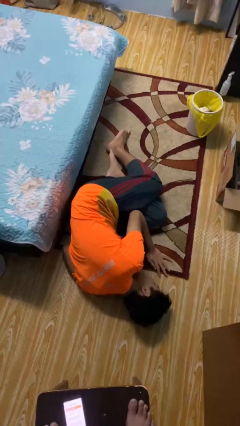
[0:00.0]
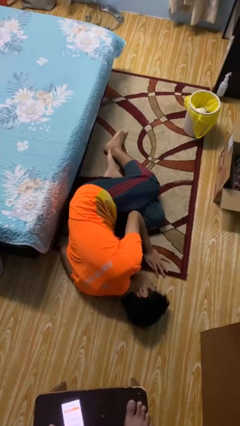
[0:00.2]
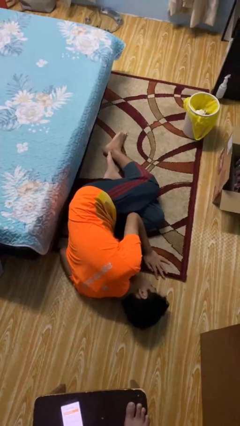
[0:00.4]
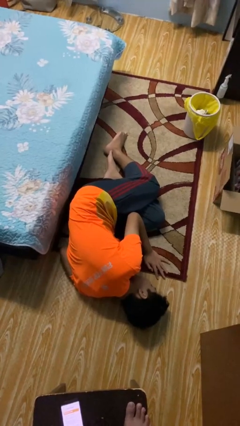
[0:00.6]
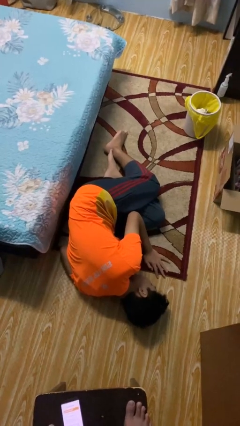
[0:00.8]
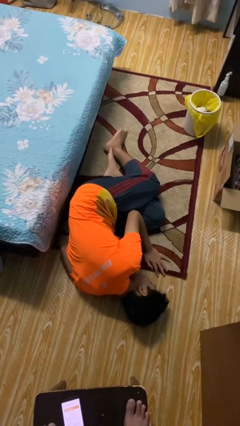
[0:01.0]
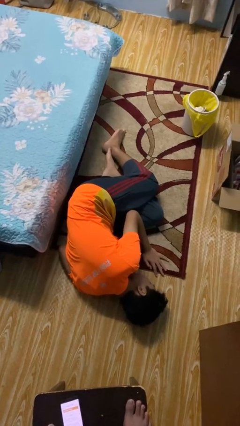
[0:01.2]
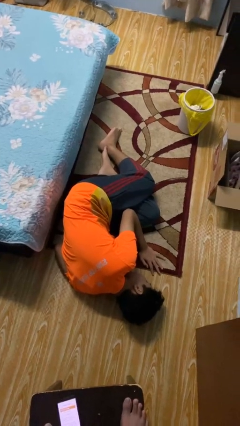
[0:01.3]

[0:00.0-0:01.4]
person lies down on floor

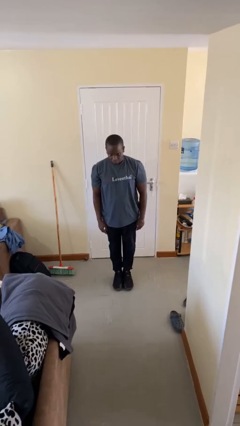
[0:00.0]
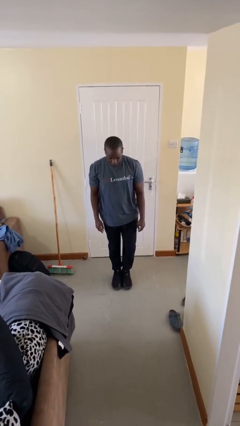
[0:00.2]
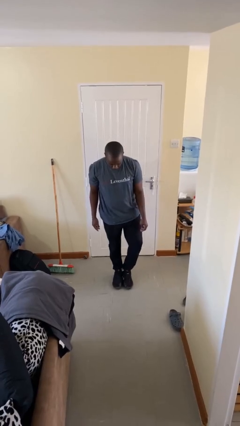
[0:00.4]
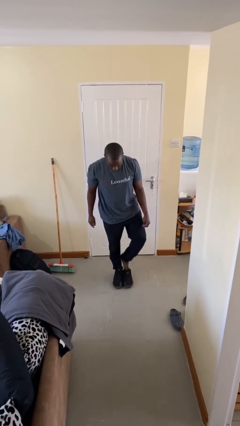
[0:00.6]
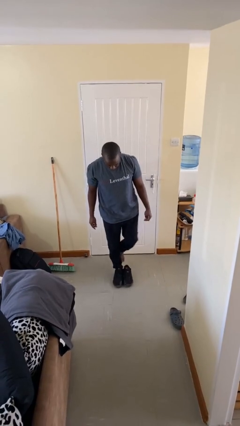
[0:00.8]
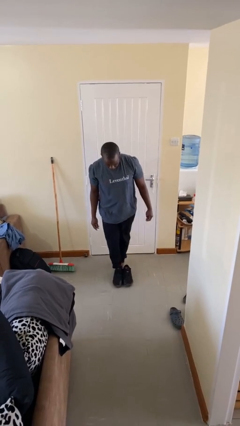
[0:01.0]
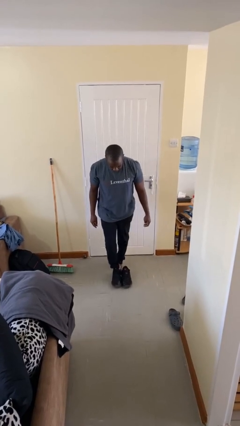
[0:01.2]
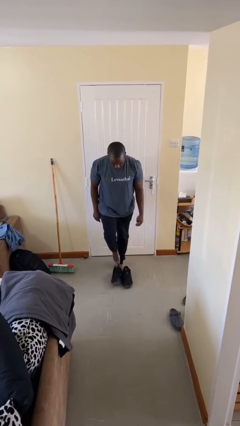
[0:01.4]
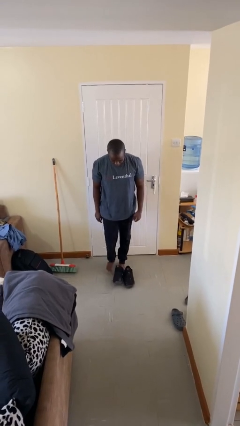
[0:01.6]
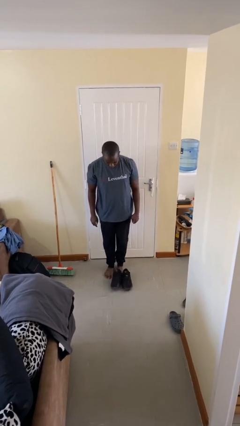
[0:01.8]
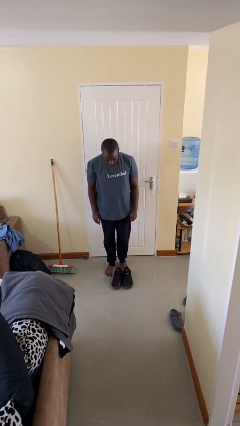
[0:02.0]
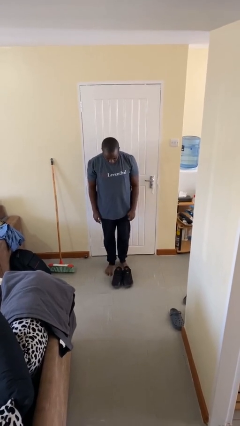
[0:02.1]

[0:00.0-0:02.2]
person takes off shoes

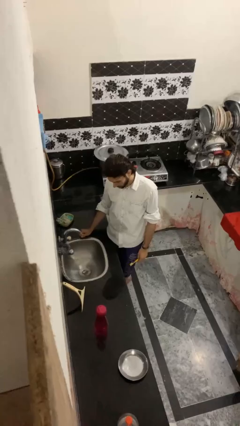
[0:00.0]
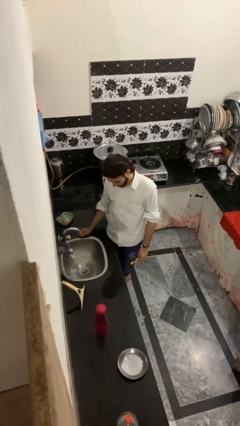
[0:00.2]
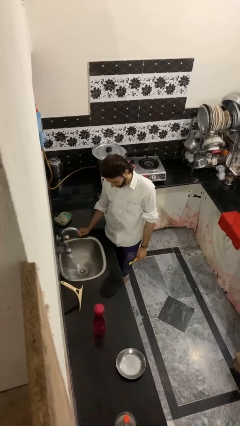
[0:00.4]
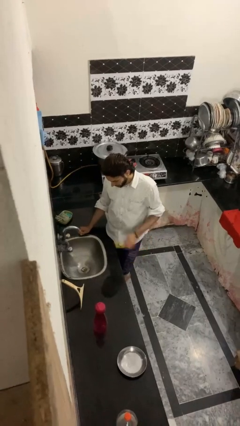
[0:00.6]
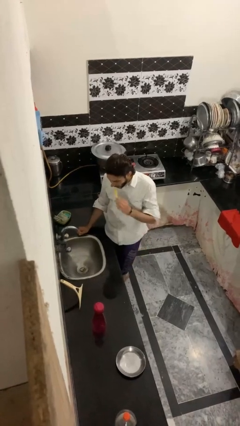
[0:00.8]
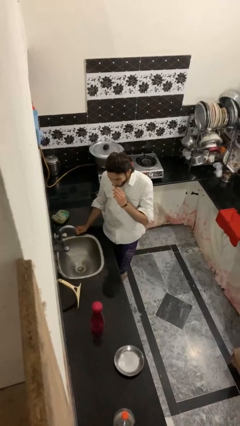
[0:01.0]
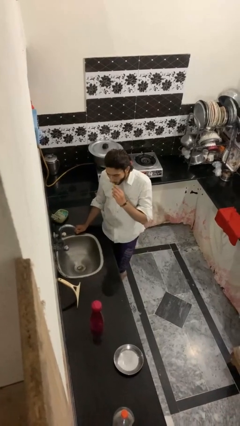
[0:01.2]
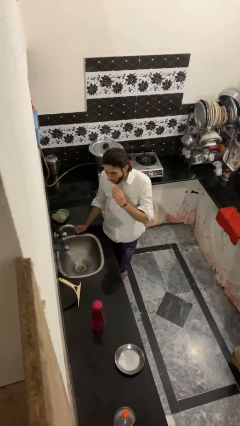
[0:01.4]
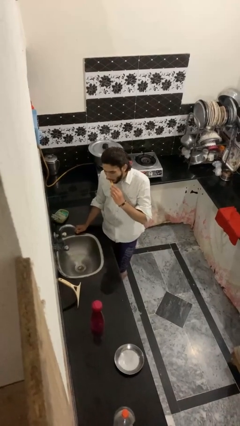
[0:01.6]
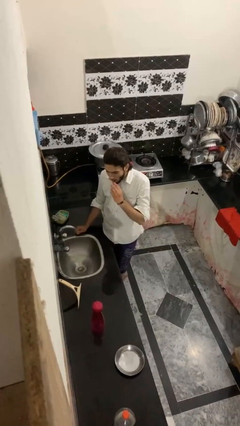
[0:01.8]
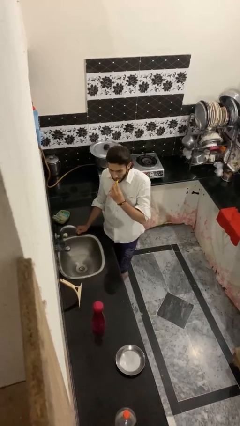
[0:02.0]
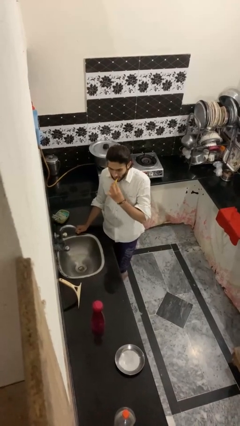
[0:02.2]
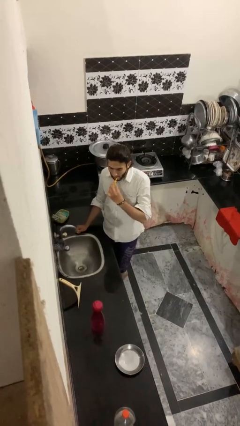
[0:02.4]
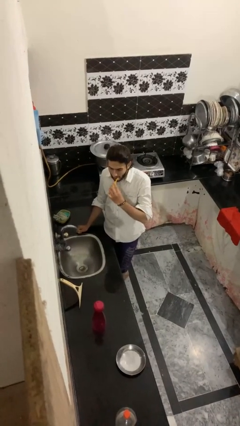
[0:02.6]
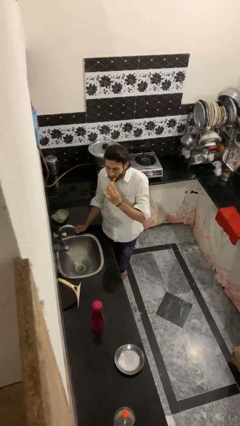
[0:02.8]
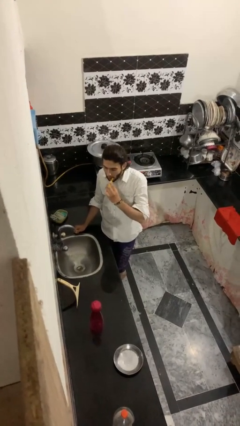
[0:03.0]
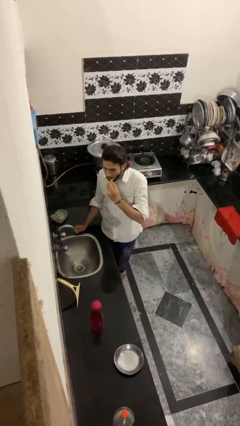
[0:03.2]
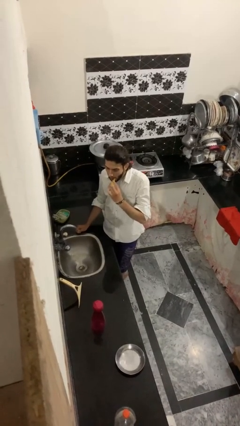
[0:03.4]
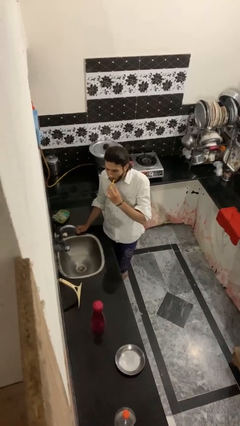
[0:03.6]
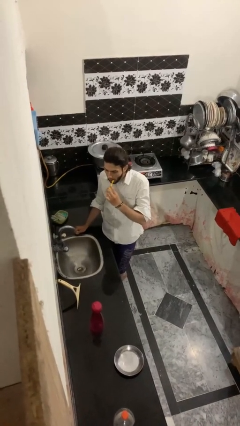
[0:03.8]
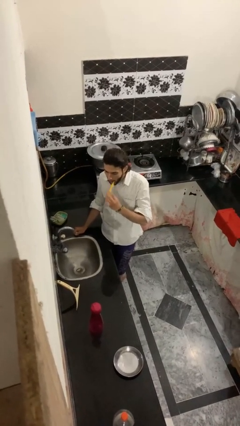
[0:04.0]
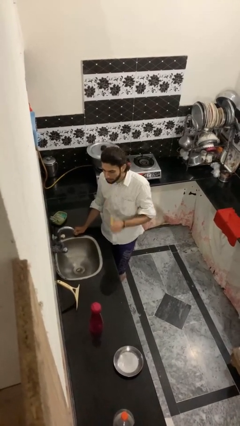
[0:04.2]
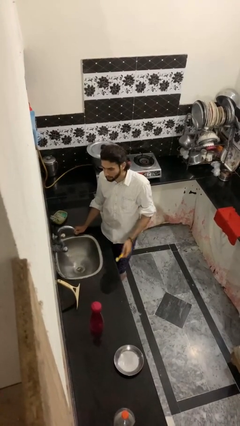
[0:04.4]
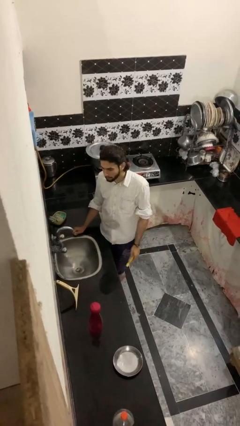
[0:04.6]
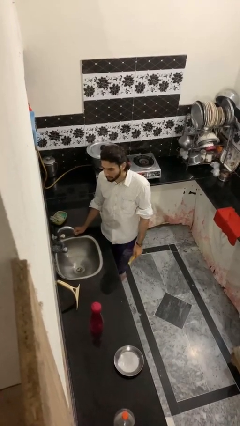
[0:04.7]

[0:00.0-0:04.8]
person brushes teeth

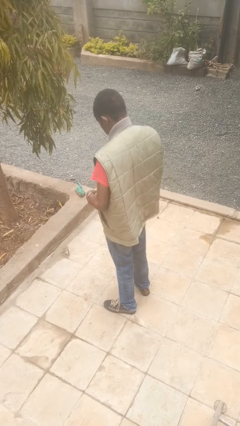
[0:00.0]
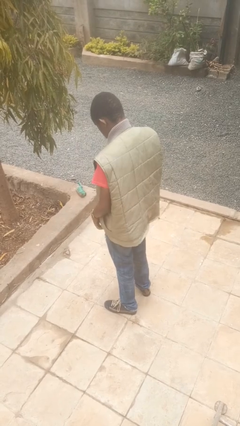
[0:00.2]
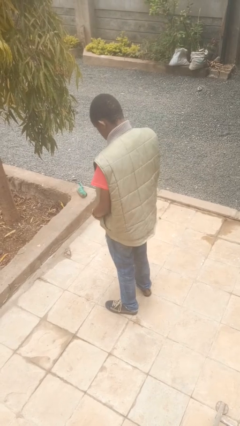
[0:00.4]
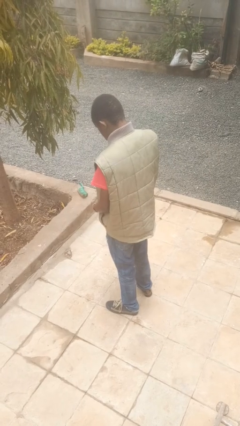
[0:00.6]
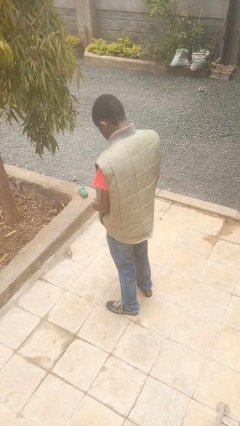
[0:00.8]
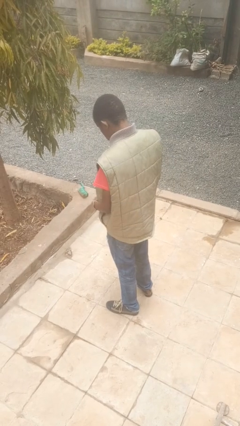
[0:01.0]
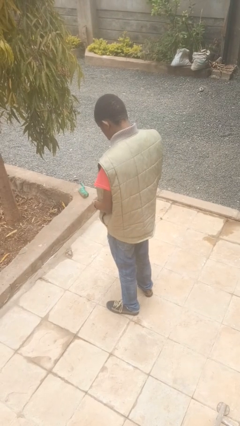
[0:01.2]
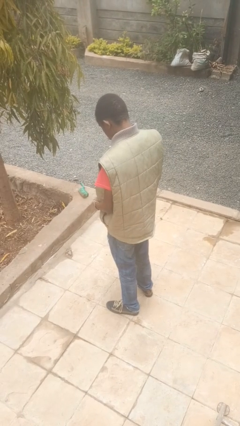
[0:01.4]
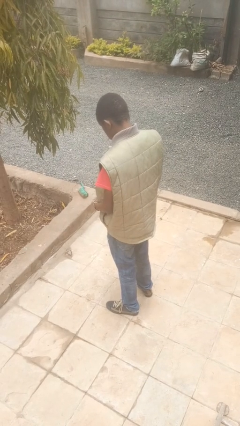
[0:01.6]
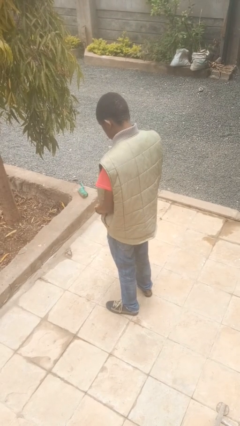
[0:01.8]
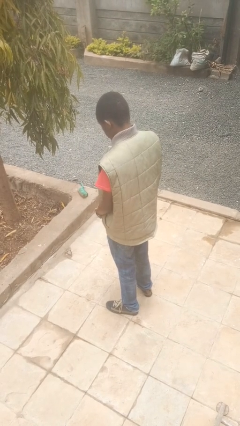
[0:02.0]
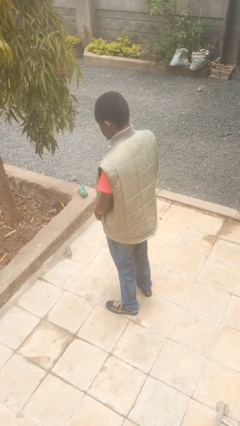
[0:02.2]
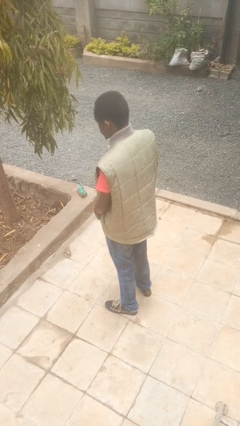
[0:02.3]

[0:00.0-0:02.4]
person zips up jacket

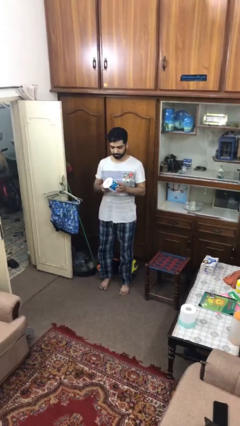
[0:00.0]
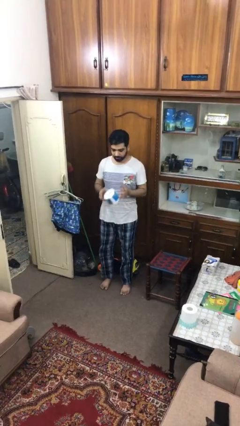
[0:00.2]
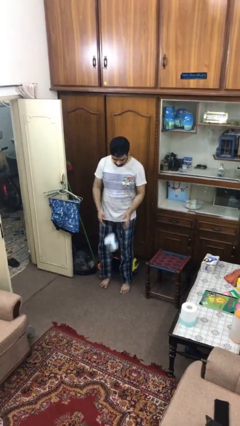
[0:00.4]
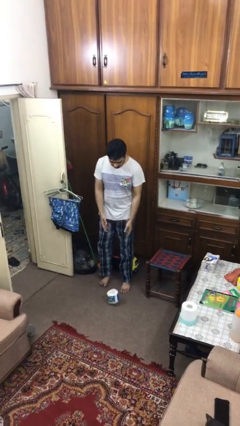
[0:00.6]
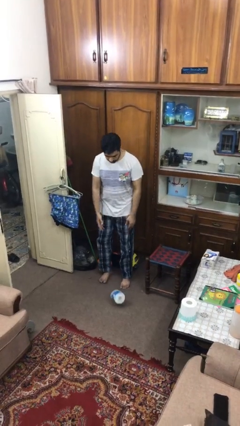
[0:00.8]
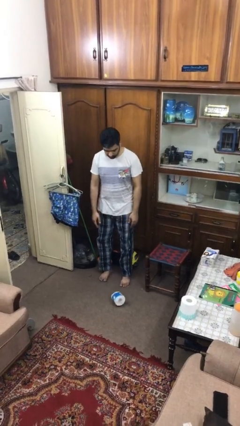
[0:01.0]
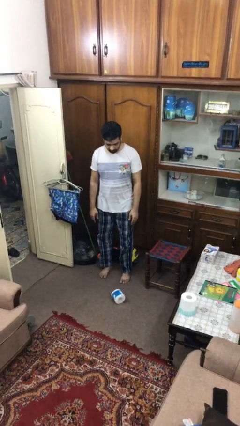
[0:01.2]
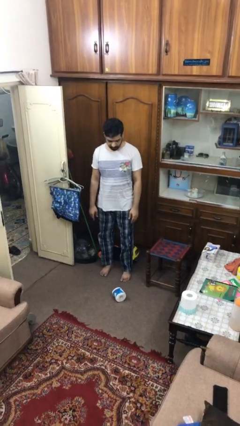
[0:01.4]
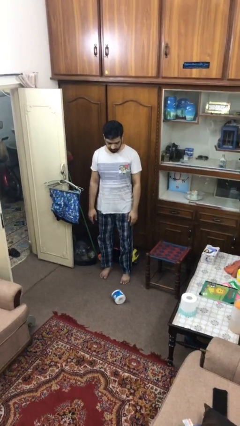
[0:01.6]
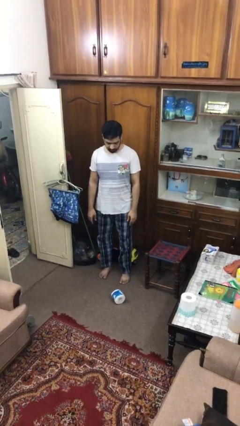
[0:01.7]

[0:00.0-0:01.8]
person drops object

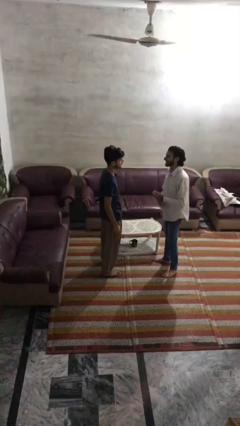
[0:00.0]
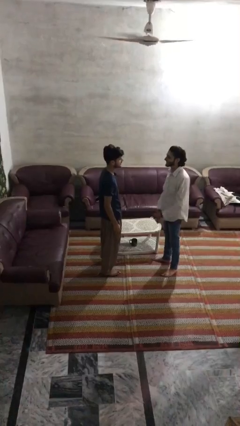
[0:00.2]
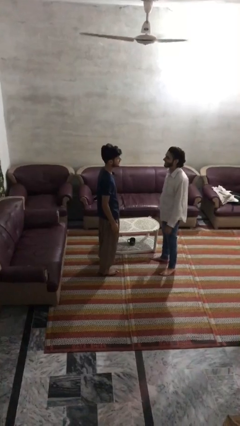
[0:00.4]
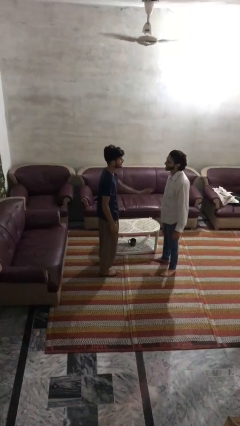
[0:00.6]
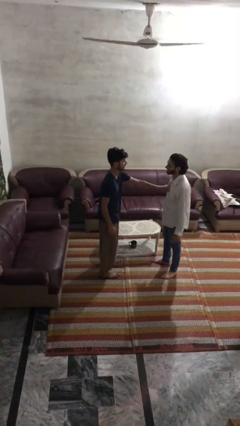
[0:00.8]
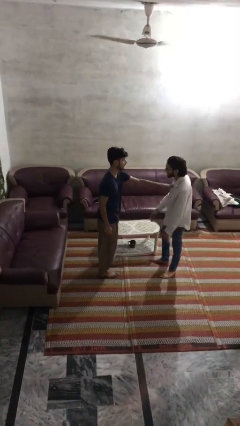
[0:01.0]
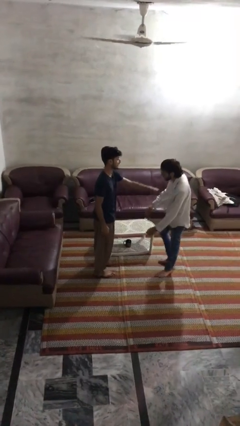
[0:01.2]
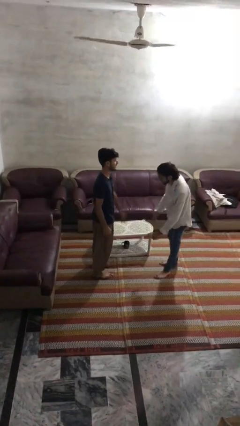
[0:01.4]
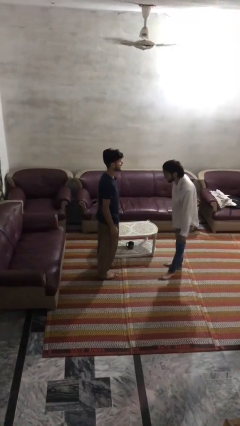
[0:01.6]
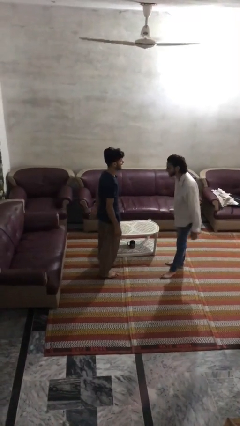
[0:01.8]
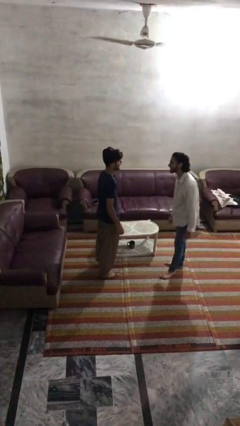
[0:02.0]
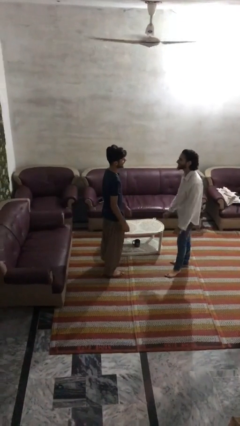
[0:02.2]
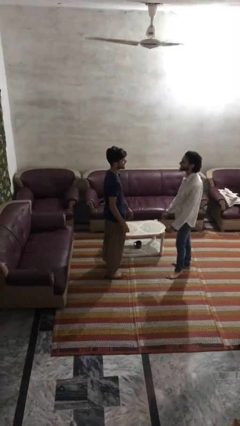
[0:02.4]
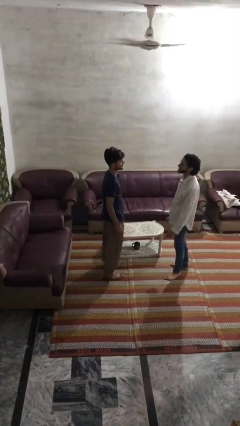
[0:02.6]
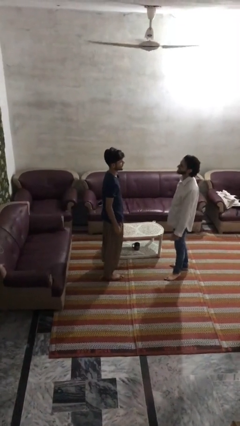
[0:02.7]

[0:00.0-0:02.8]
person shoves person

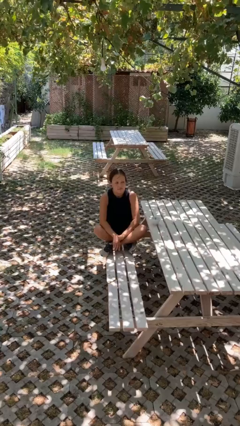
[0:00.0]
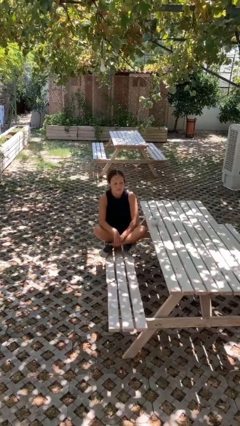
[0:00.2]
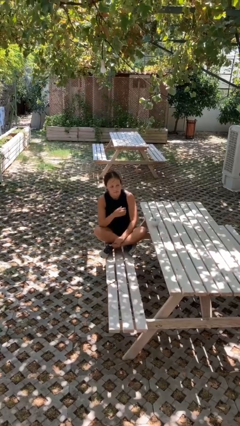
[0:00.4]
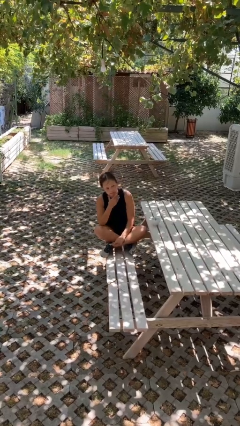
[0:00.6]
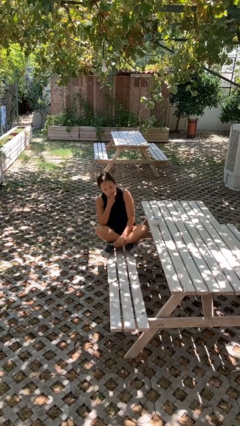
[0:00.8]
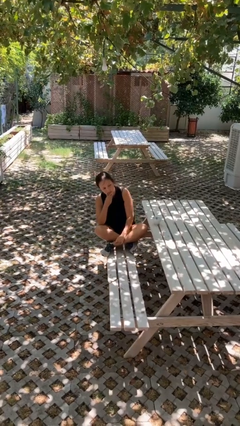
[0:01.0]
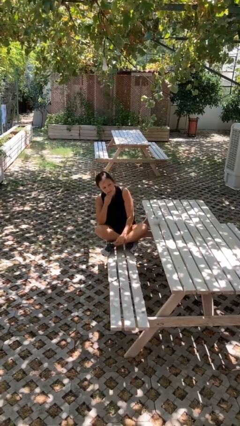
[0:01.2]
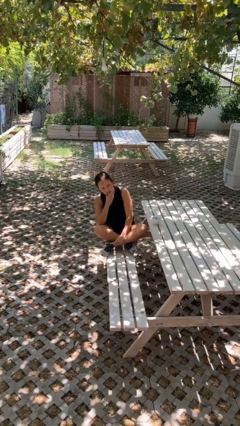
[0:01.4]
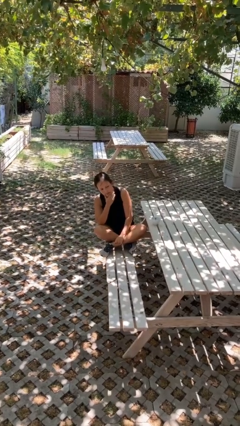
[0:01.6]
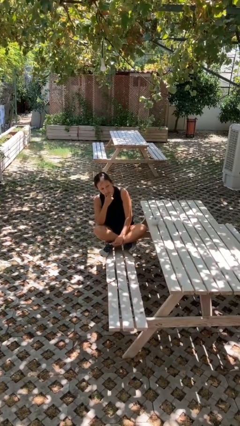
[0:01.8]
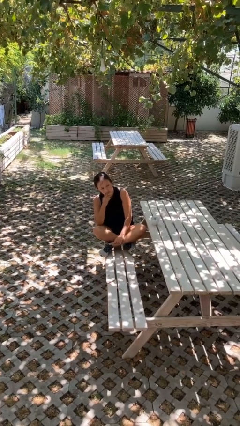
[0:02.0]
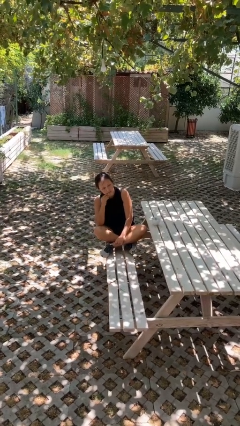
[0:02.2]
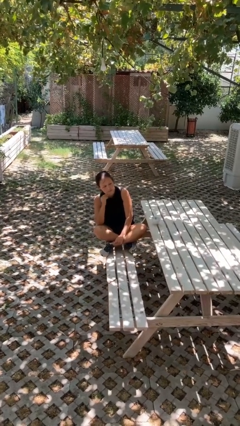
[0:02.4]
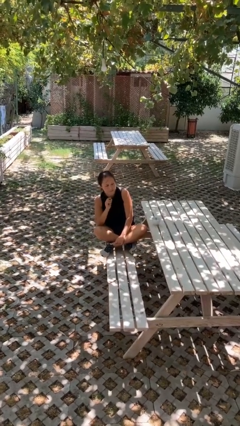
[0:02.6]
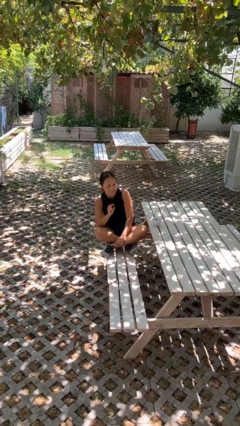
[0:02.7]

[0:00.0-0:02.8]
person strokes chin
